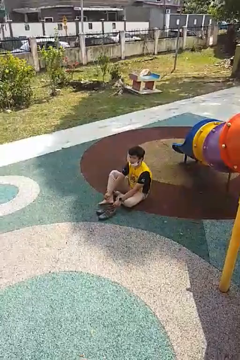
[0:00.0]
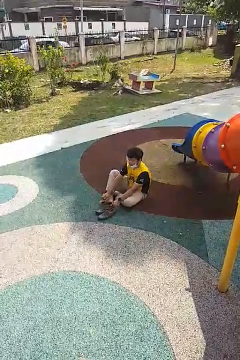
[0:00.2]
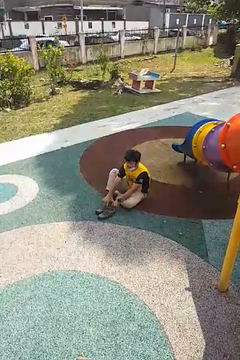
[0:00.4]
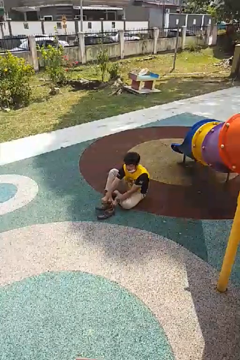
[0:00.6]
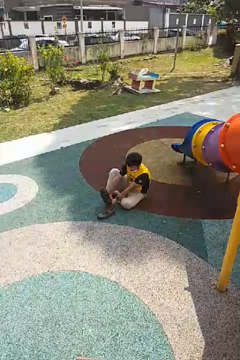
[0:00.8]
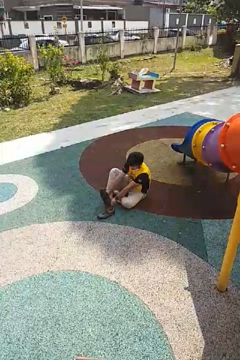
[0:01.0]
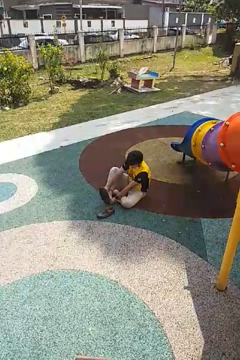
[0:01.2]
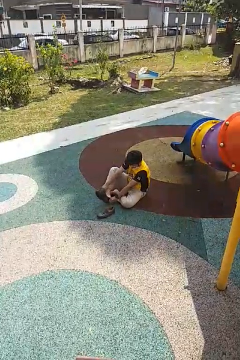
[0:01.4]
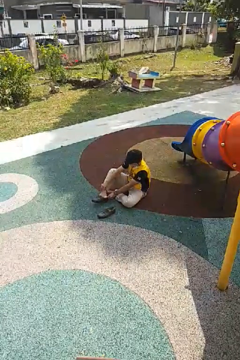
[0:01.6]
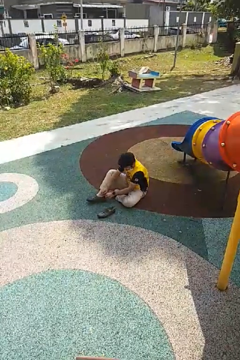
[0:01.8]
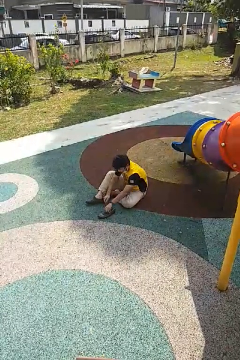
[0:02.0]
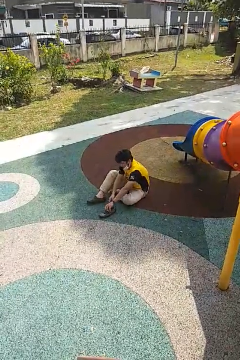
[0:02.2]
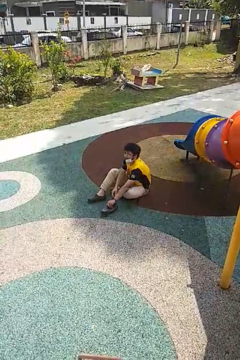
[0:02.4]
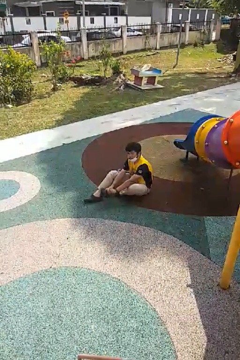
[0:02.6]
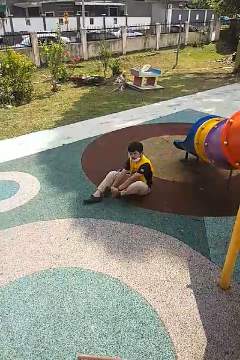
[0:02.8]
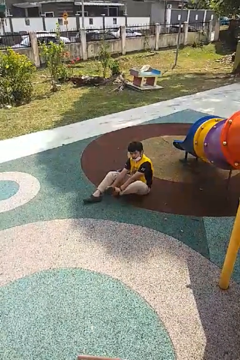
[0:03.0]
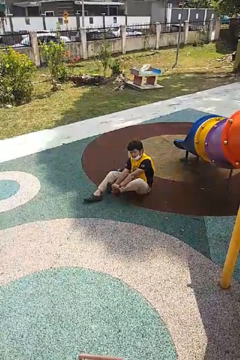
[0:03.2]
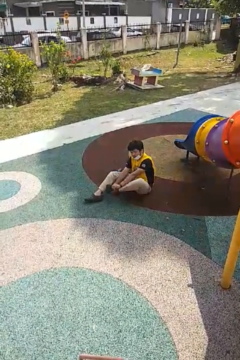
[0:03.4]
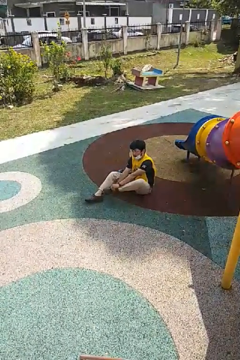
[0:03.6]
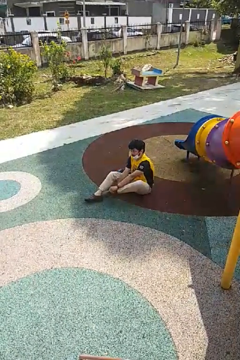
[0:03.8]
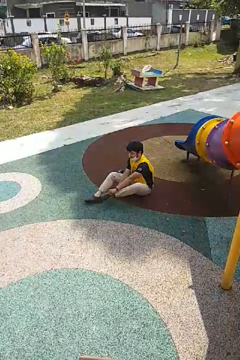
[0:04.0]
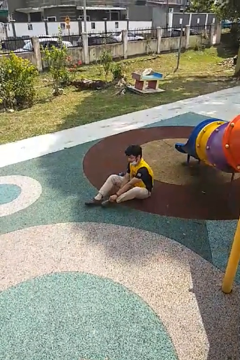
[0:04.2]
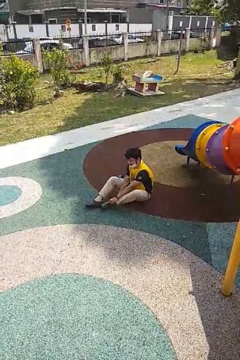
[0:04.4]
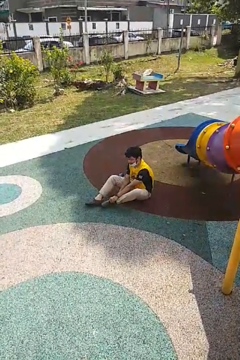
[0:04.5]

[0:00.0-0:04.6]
person puts on shoes

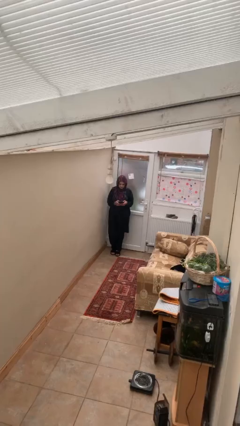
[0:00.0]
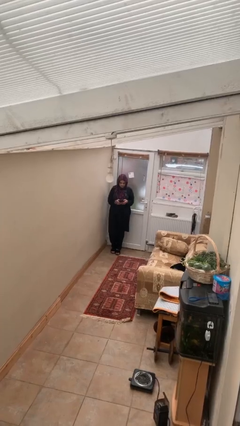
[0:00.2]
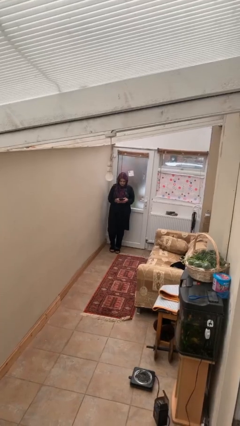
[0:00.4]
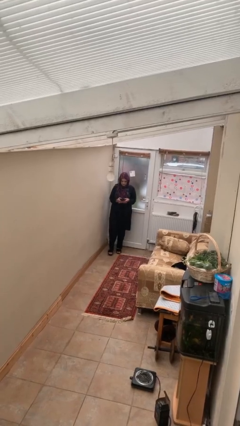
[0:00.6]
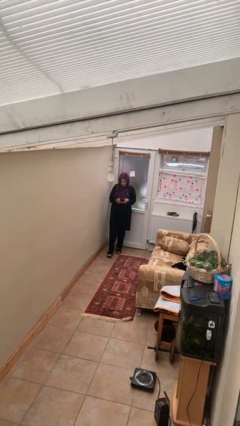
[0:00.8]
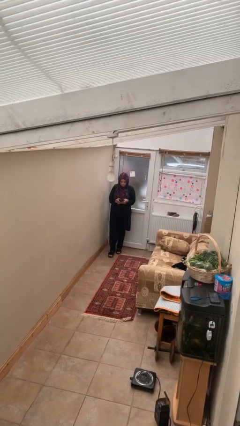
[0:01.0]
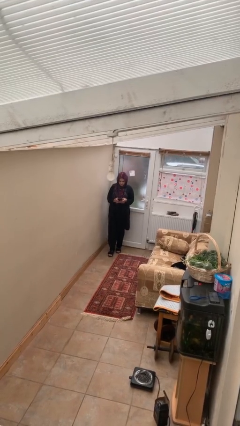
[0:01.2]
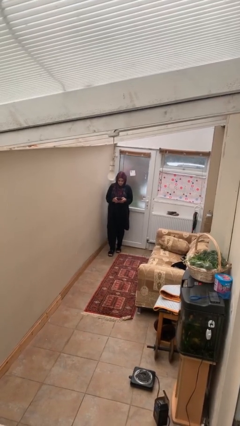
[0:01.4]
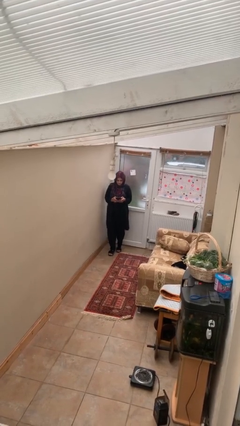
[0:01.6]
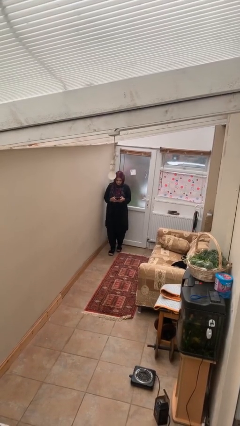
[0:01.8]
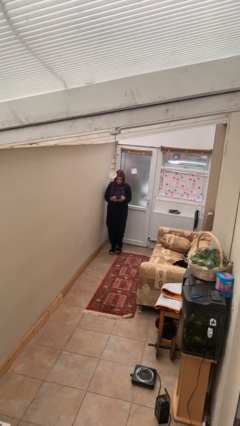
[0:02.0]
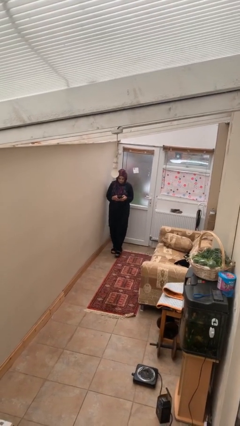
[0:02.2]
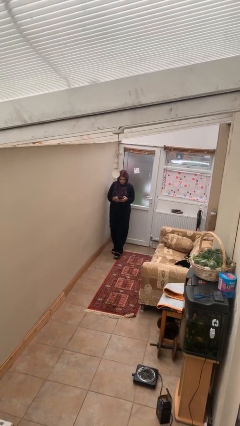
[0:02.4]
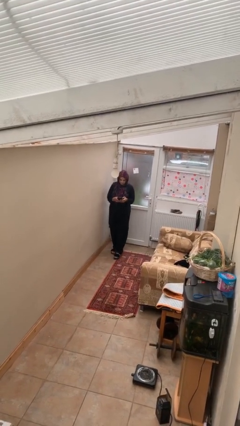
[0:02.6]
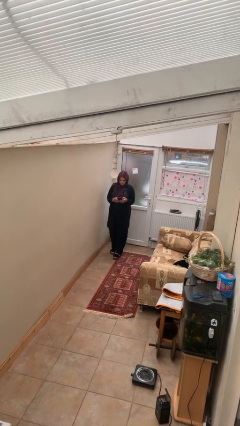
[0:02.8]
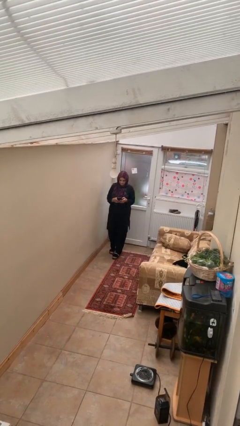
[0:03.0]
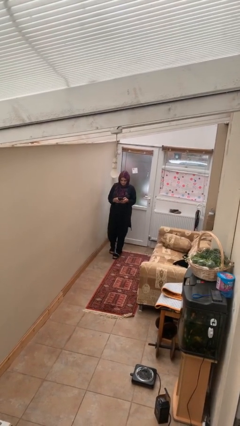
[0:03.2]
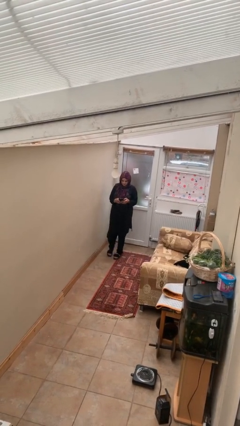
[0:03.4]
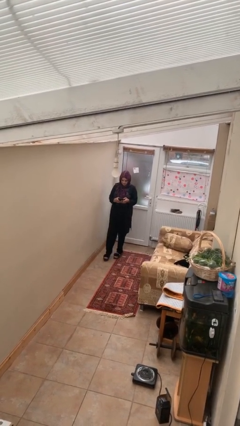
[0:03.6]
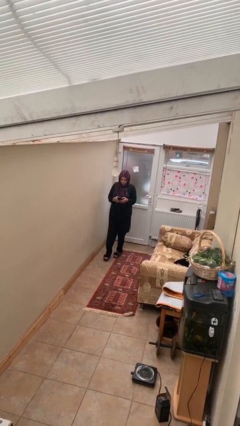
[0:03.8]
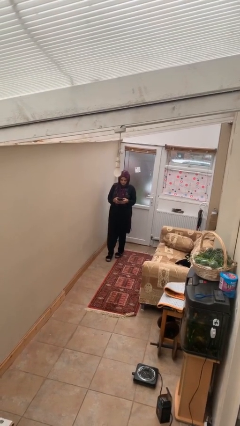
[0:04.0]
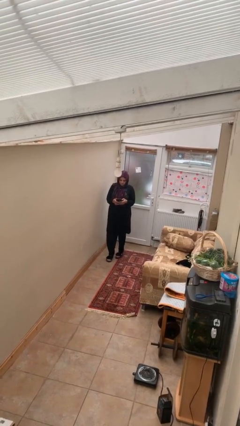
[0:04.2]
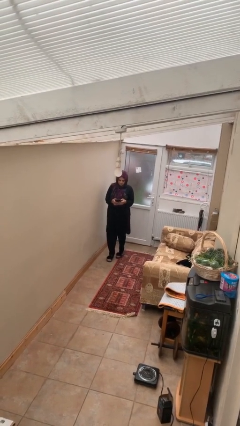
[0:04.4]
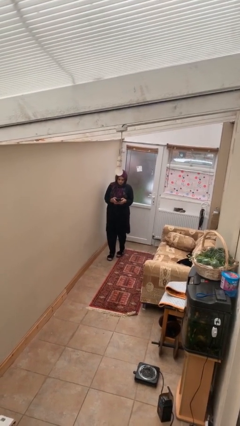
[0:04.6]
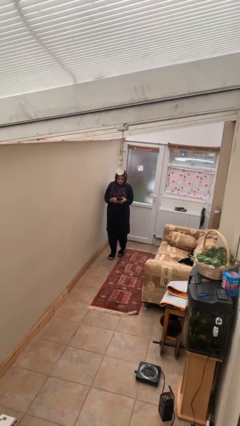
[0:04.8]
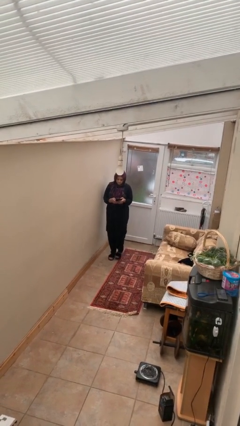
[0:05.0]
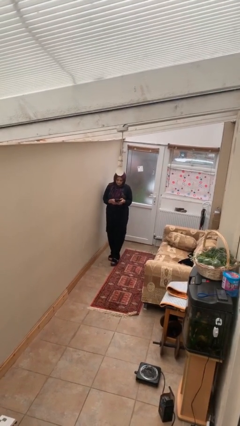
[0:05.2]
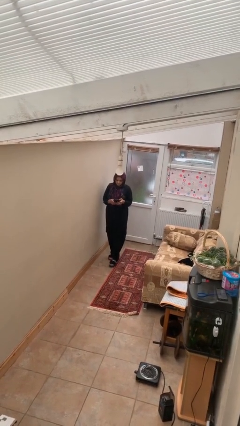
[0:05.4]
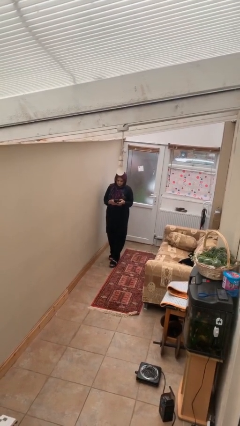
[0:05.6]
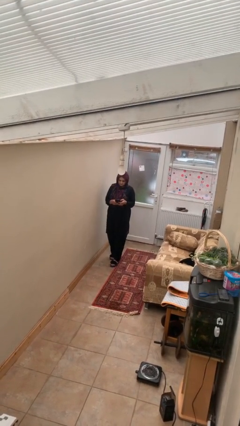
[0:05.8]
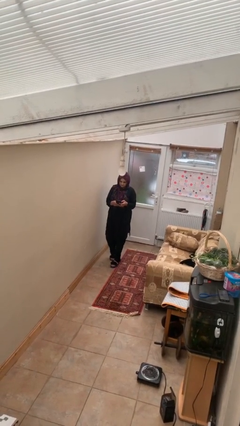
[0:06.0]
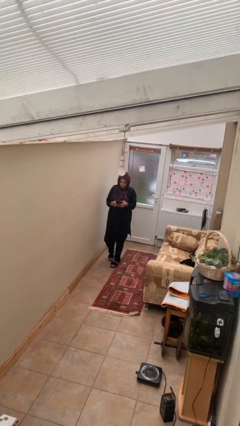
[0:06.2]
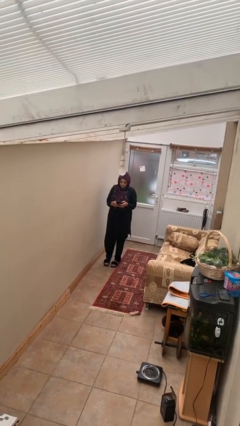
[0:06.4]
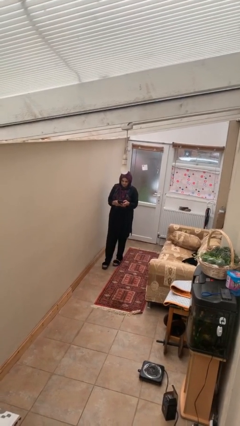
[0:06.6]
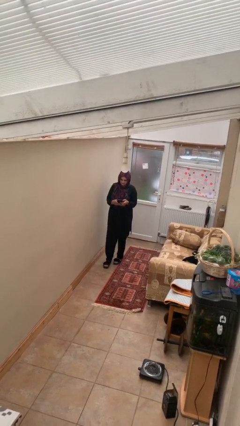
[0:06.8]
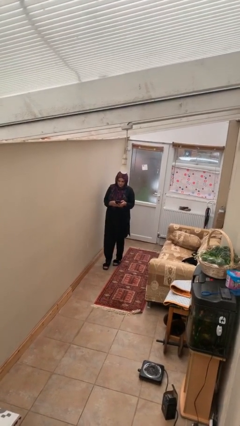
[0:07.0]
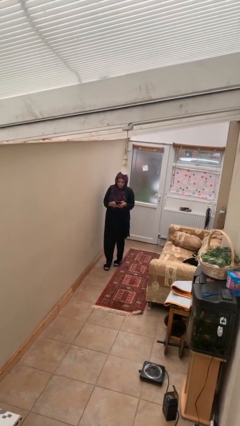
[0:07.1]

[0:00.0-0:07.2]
person texts on phone

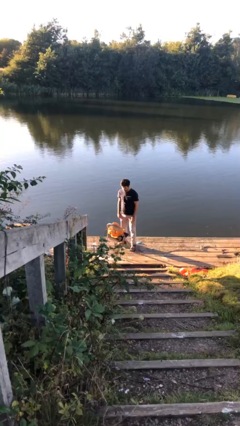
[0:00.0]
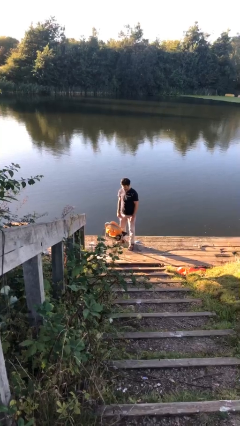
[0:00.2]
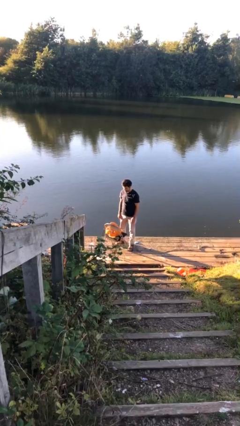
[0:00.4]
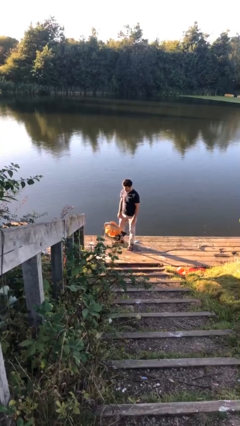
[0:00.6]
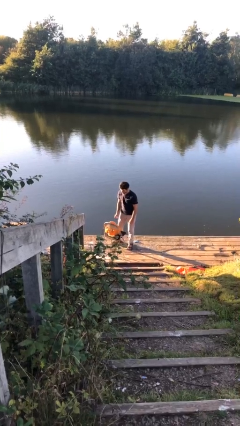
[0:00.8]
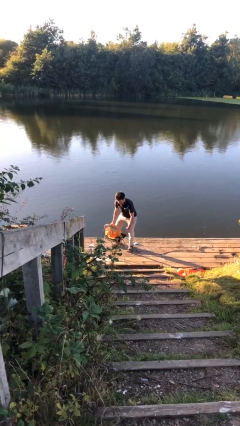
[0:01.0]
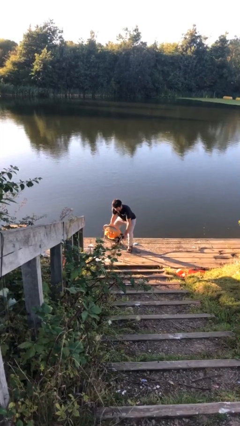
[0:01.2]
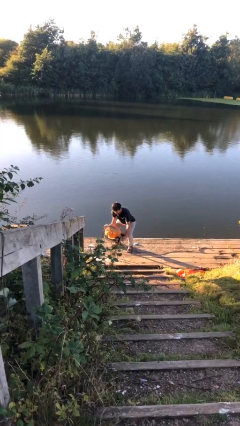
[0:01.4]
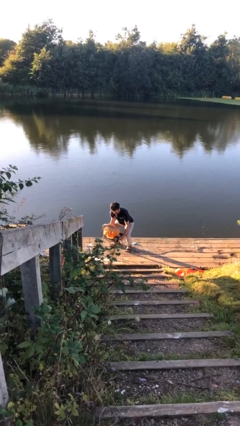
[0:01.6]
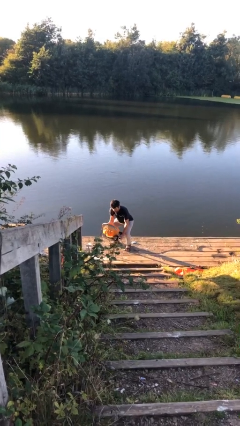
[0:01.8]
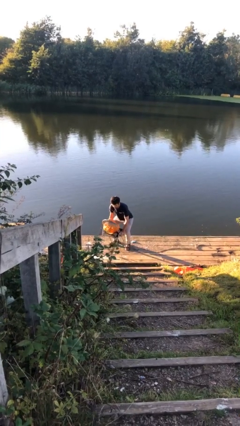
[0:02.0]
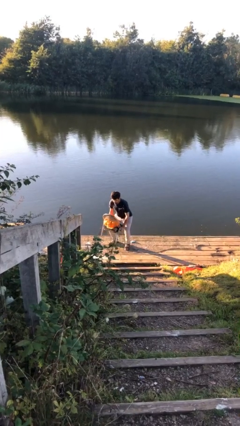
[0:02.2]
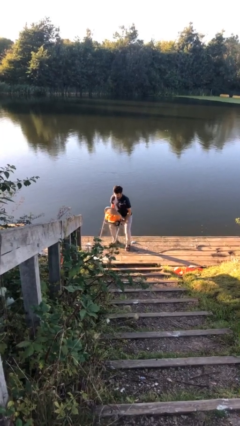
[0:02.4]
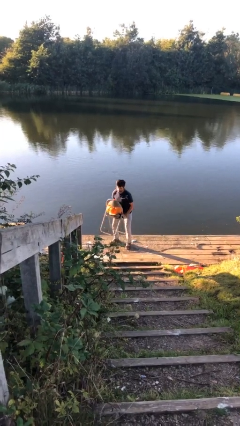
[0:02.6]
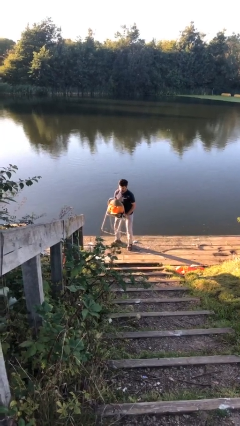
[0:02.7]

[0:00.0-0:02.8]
person picks up object from floor

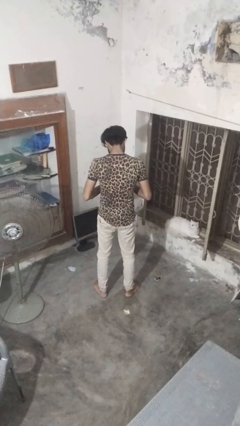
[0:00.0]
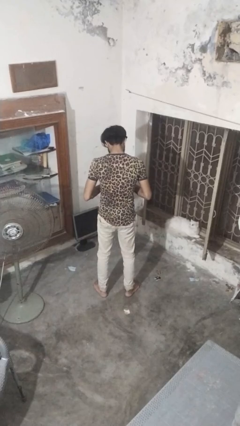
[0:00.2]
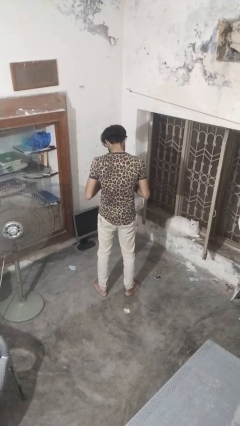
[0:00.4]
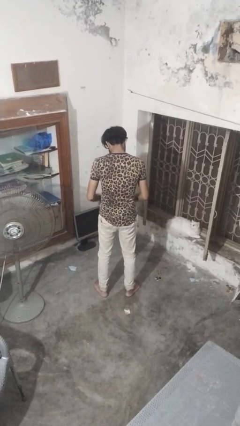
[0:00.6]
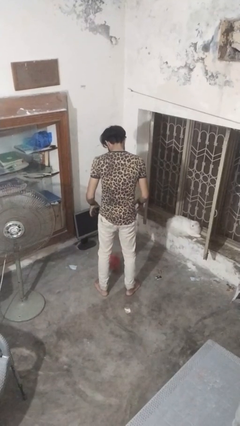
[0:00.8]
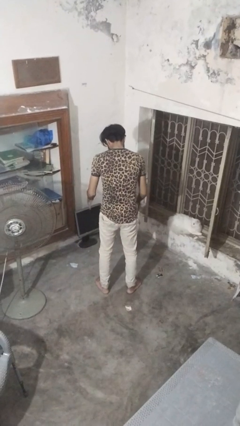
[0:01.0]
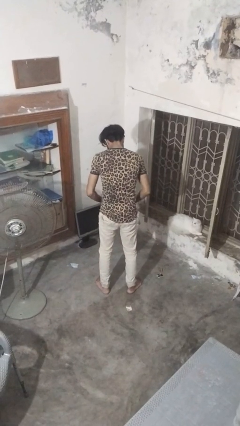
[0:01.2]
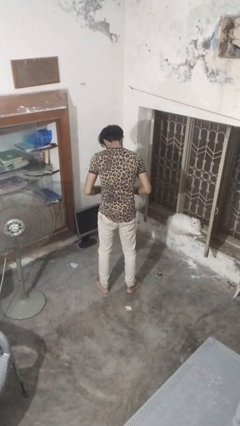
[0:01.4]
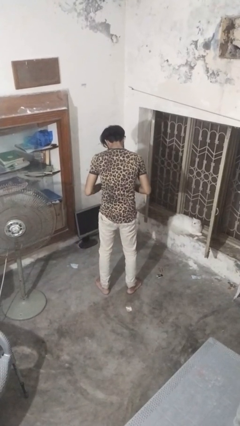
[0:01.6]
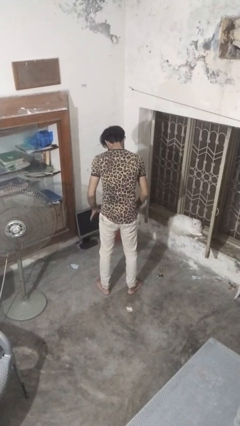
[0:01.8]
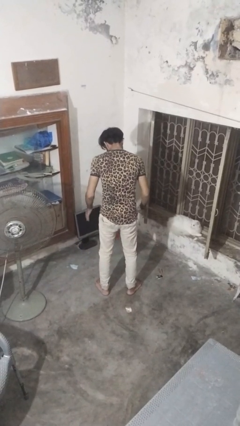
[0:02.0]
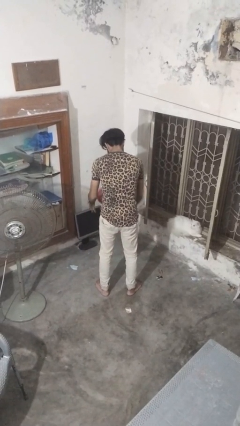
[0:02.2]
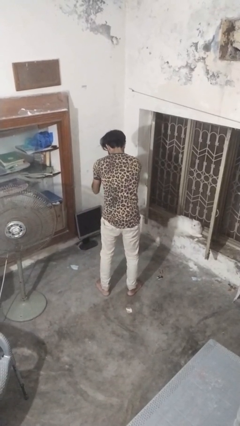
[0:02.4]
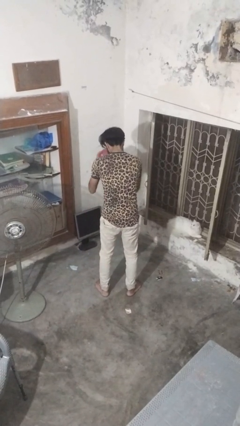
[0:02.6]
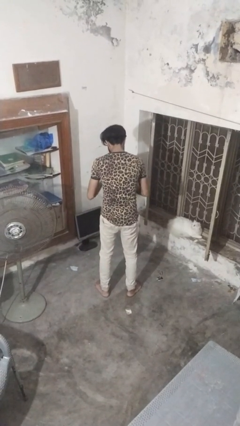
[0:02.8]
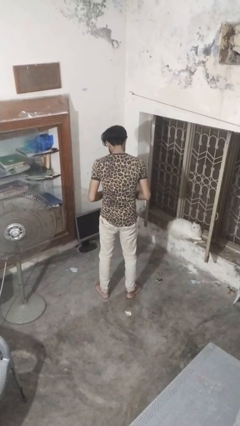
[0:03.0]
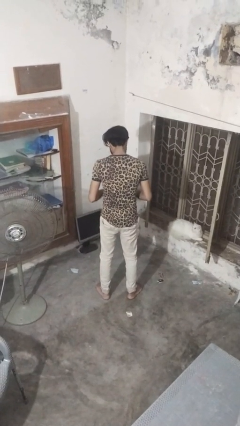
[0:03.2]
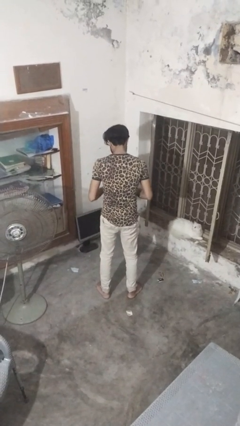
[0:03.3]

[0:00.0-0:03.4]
person bounces ball on floor

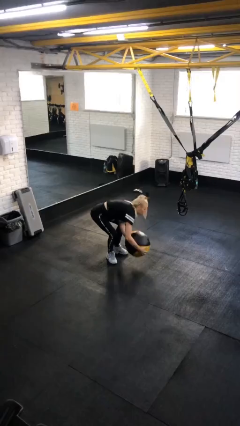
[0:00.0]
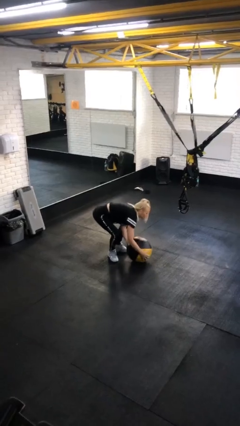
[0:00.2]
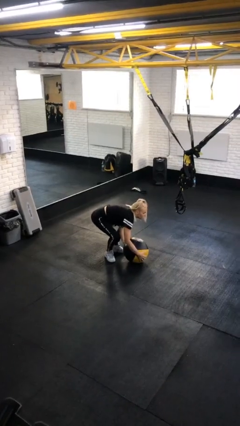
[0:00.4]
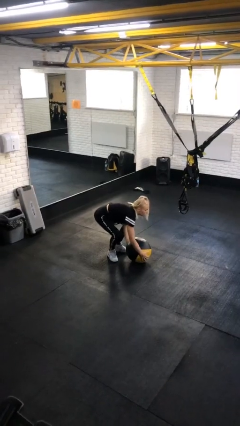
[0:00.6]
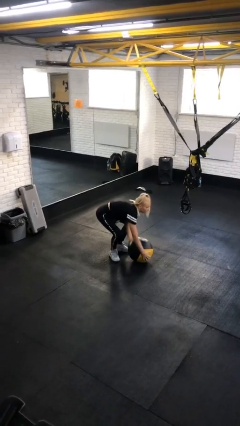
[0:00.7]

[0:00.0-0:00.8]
person puts down object on floor
